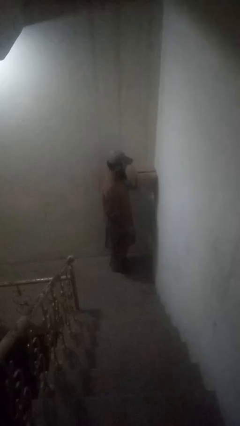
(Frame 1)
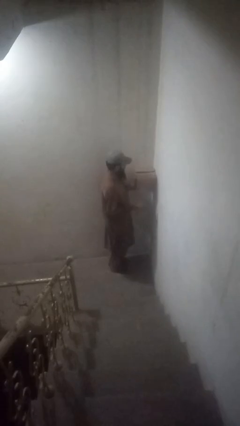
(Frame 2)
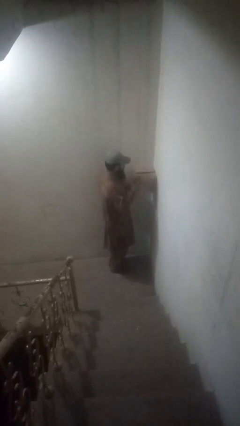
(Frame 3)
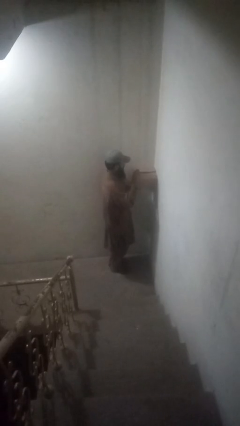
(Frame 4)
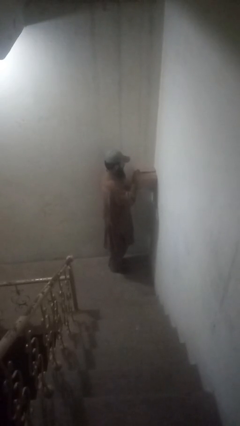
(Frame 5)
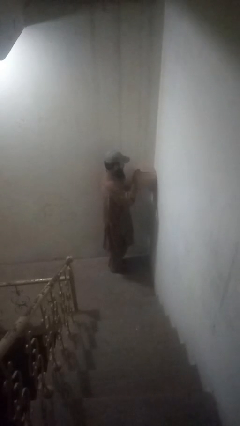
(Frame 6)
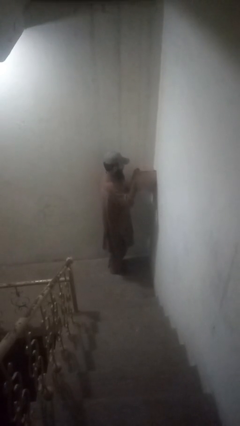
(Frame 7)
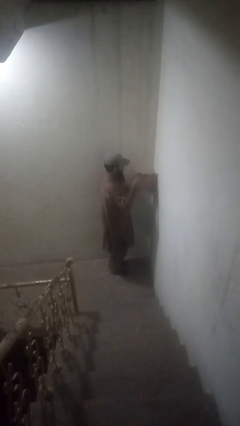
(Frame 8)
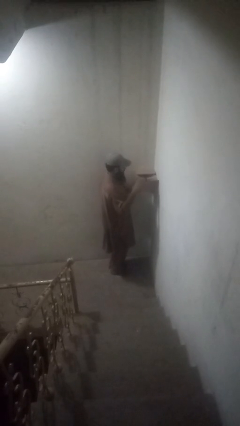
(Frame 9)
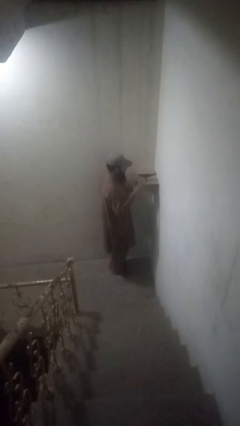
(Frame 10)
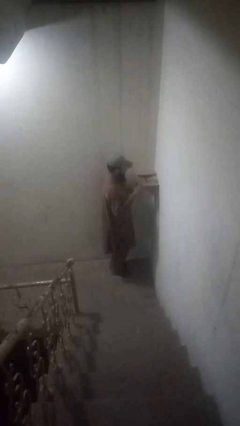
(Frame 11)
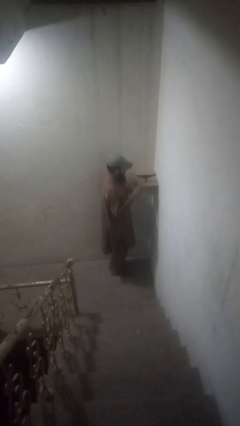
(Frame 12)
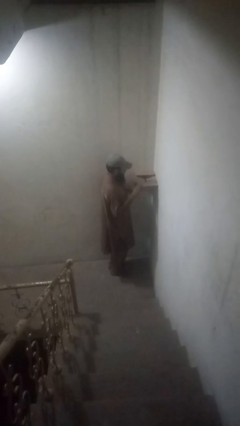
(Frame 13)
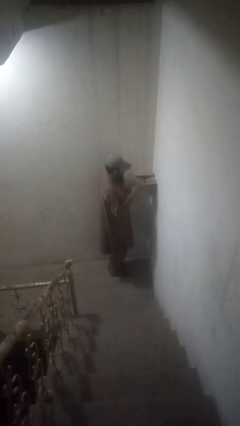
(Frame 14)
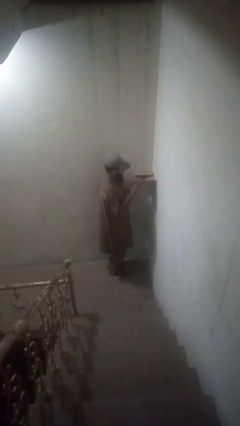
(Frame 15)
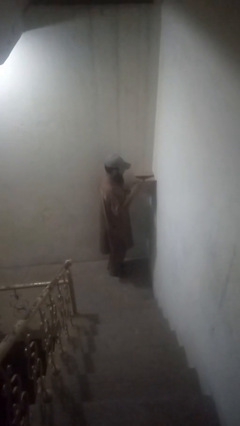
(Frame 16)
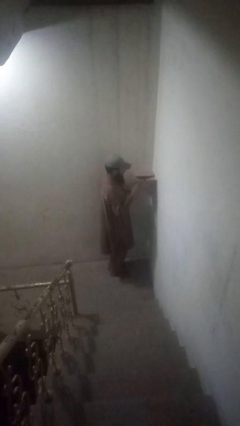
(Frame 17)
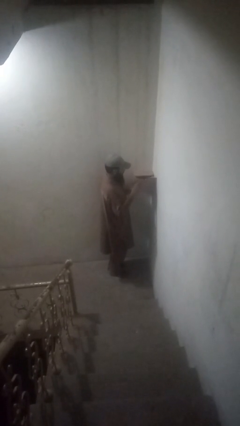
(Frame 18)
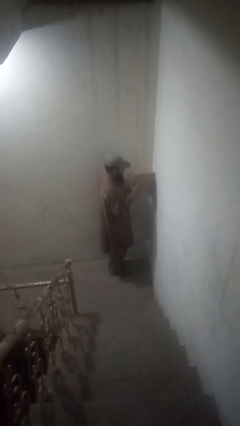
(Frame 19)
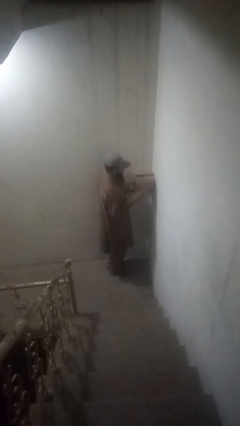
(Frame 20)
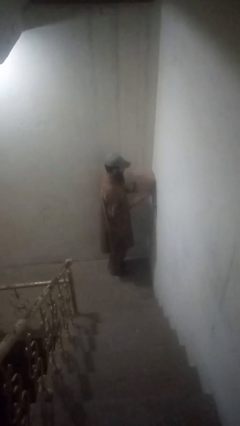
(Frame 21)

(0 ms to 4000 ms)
person opens mailbox

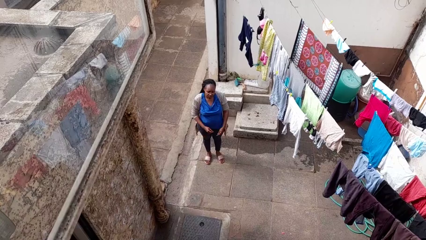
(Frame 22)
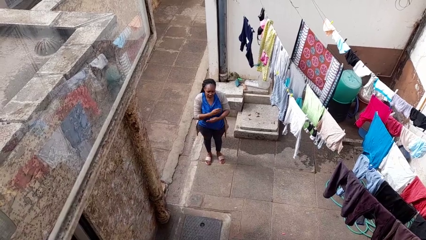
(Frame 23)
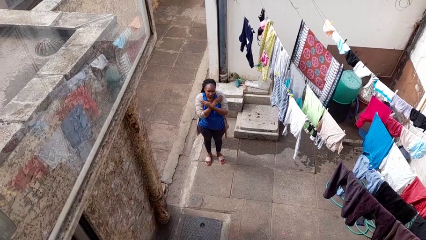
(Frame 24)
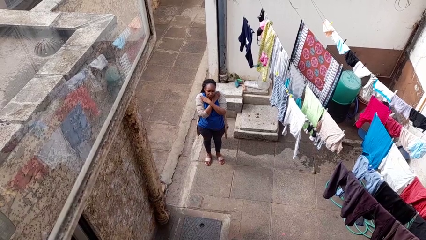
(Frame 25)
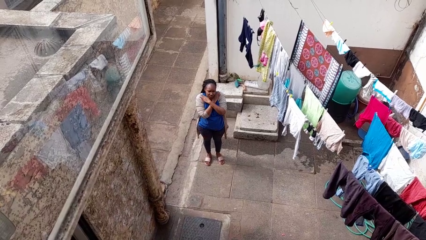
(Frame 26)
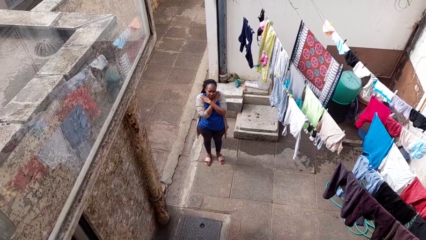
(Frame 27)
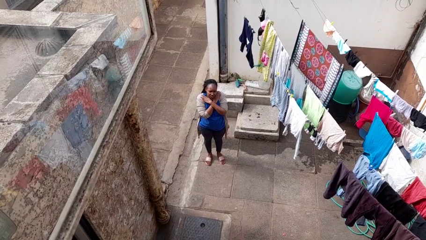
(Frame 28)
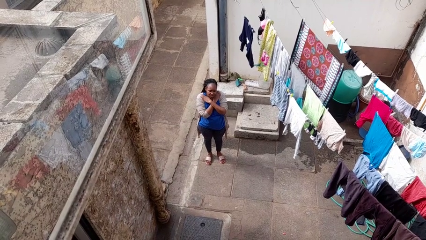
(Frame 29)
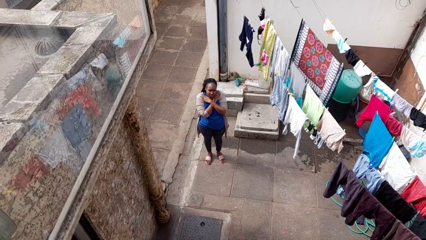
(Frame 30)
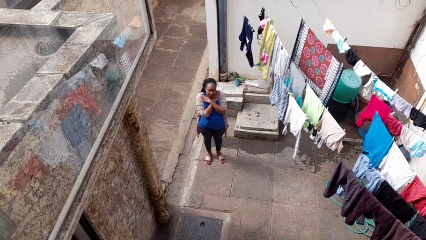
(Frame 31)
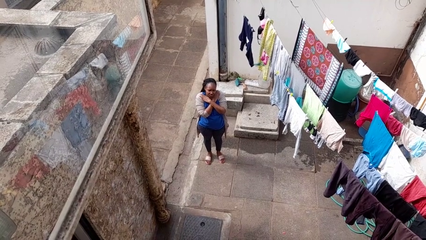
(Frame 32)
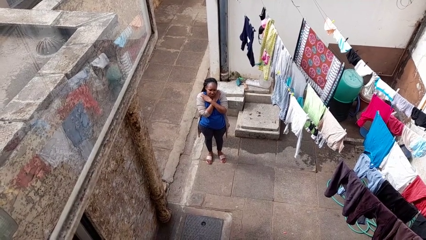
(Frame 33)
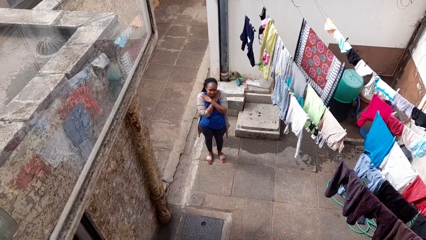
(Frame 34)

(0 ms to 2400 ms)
person gestures arms x

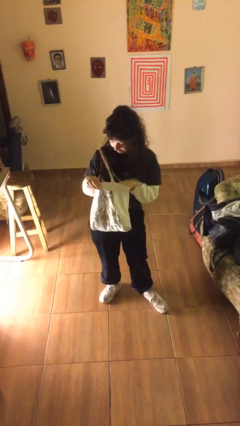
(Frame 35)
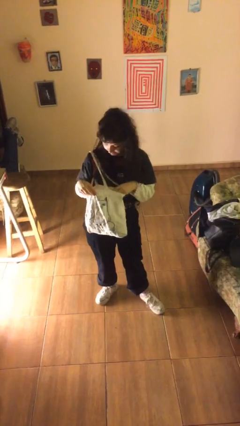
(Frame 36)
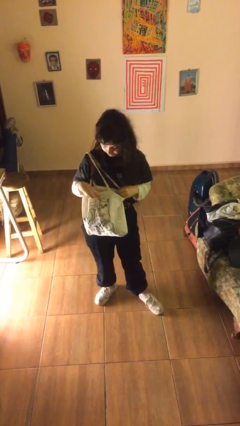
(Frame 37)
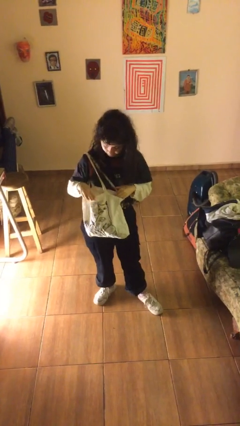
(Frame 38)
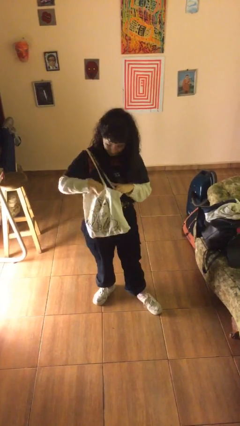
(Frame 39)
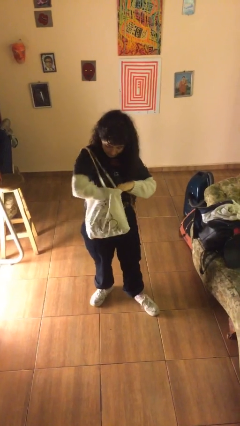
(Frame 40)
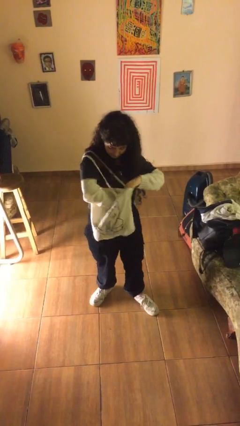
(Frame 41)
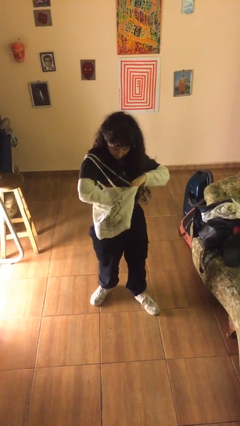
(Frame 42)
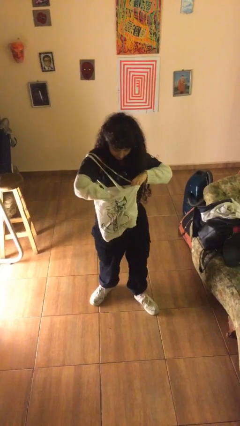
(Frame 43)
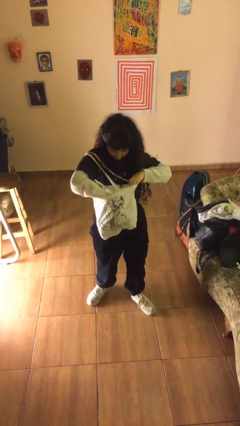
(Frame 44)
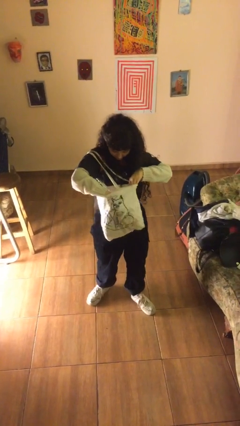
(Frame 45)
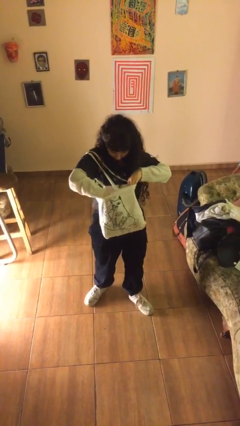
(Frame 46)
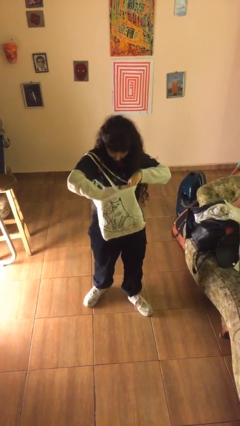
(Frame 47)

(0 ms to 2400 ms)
person searches in purse

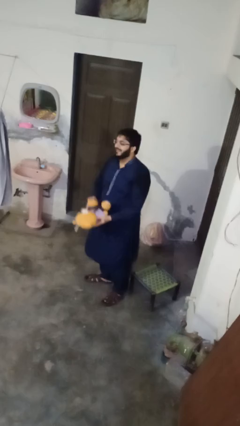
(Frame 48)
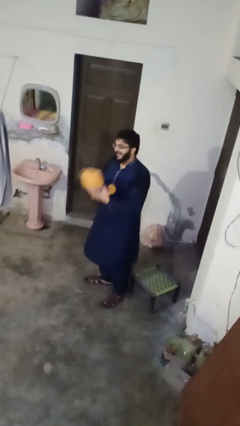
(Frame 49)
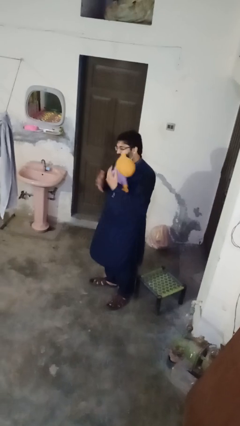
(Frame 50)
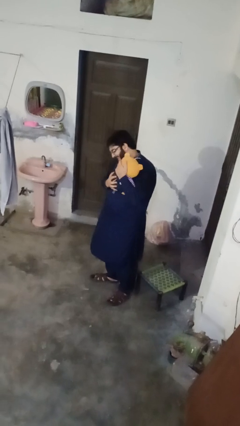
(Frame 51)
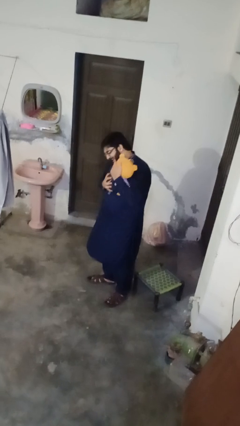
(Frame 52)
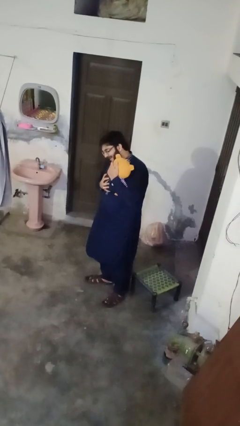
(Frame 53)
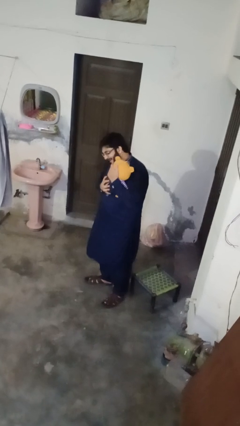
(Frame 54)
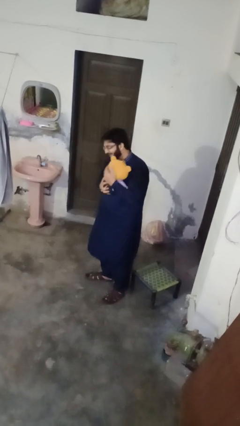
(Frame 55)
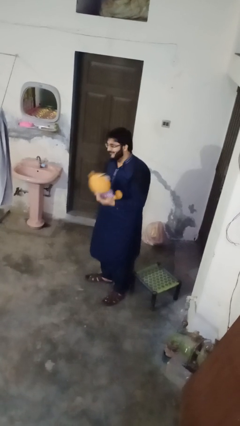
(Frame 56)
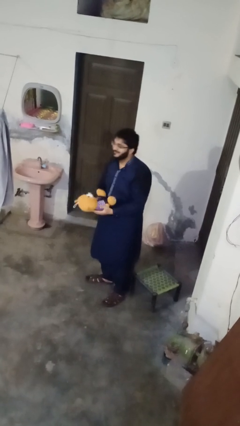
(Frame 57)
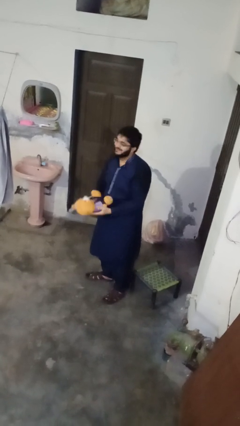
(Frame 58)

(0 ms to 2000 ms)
person hugs stuffed animal

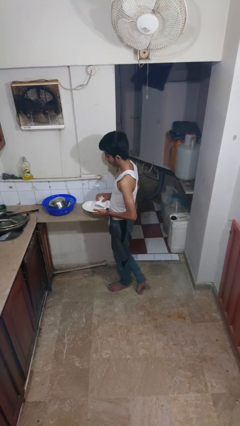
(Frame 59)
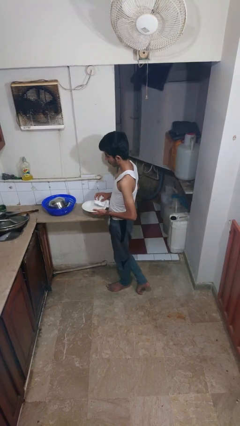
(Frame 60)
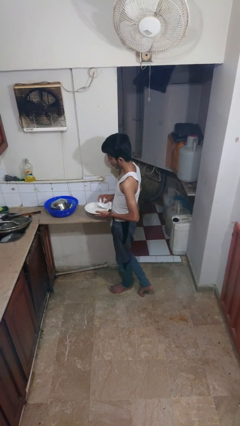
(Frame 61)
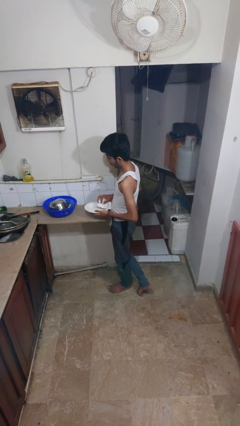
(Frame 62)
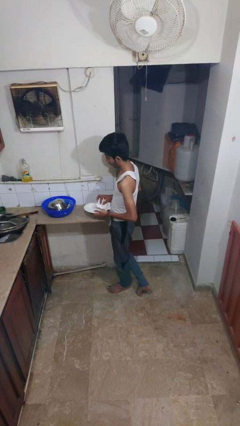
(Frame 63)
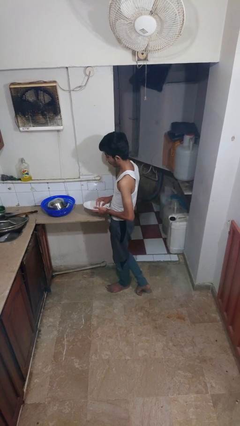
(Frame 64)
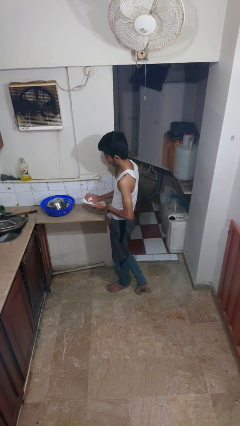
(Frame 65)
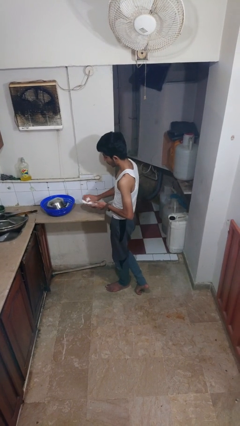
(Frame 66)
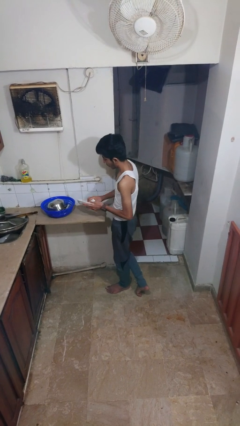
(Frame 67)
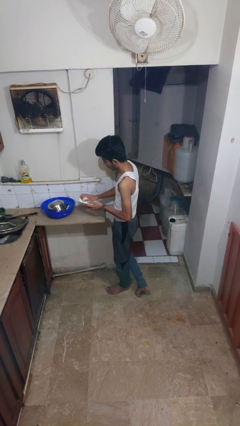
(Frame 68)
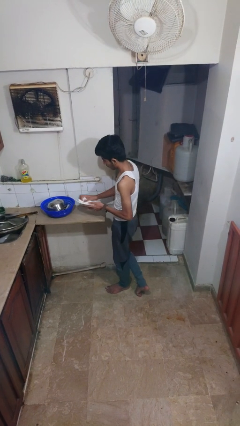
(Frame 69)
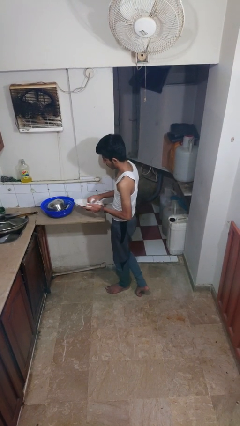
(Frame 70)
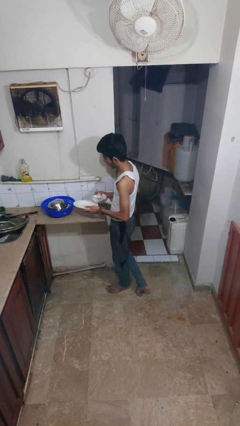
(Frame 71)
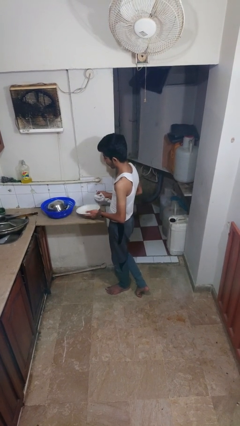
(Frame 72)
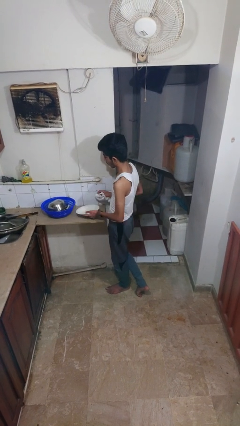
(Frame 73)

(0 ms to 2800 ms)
person dries dish

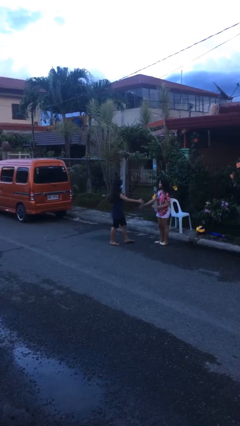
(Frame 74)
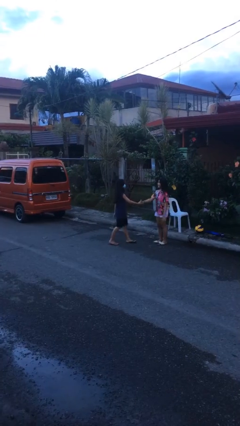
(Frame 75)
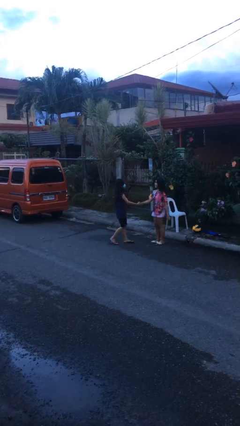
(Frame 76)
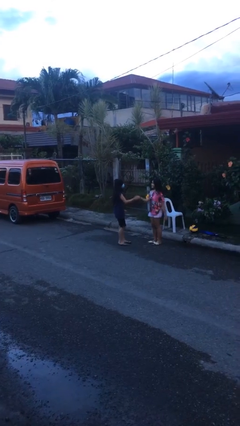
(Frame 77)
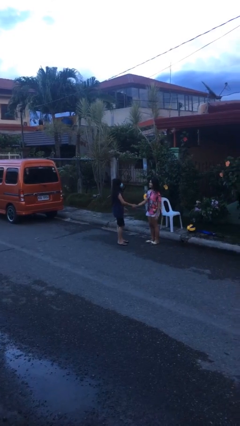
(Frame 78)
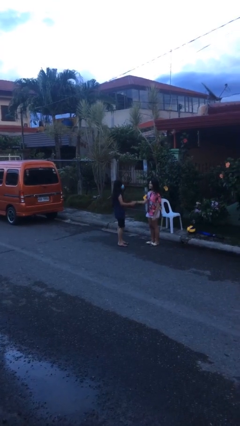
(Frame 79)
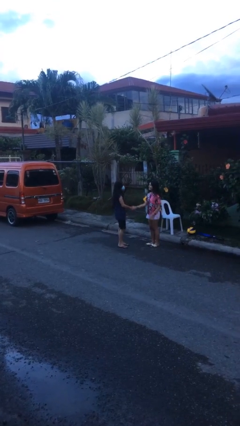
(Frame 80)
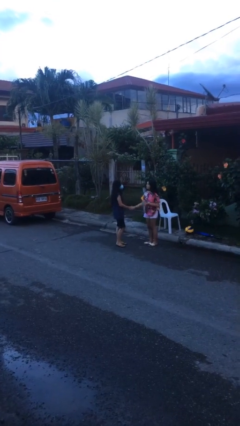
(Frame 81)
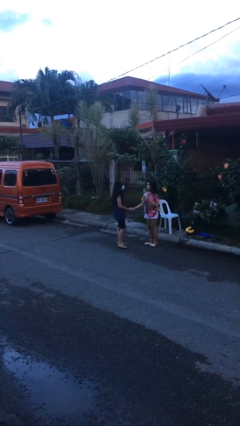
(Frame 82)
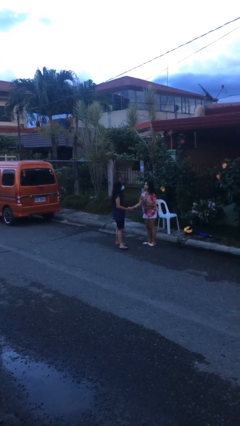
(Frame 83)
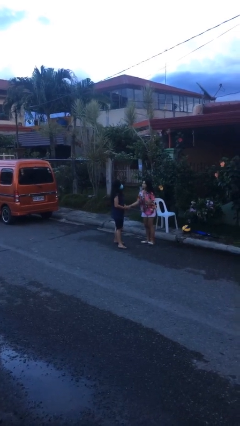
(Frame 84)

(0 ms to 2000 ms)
person shakes hand

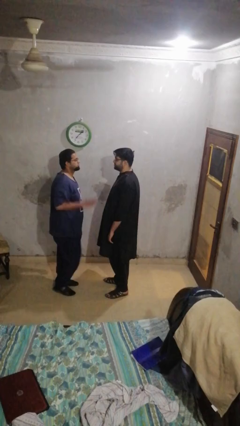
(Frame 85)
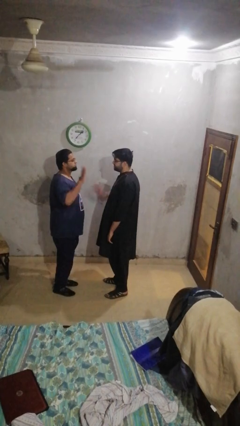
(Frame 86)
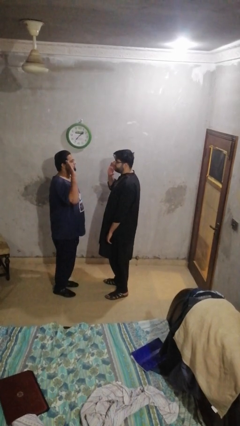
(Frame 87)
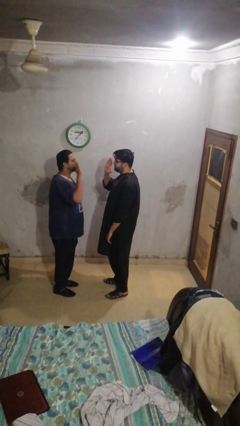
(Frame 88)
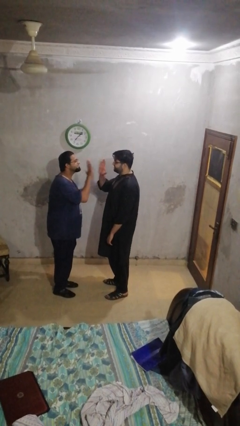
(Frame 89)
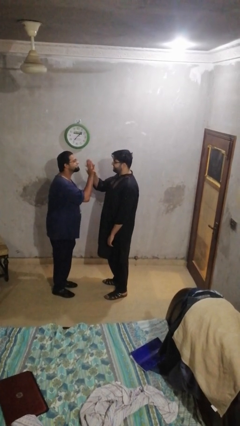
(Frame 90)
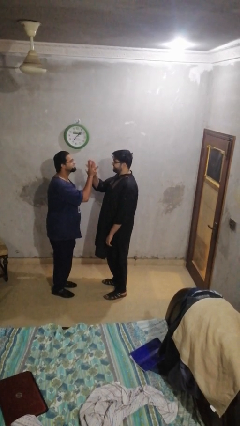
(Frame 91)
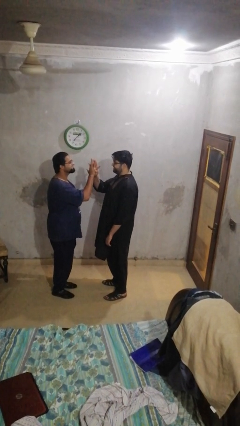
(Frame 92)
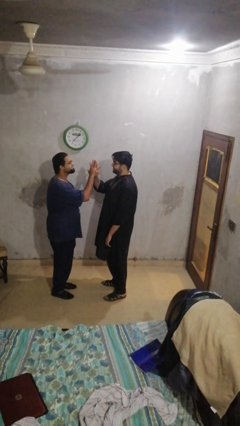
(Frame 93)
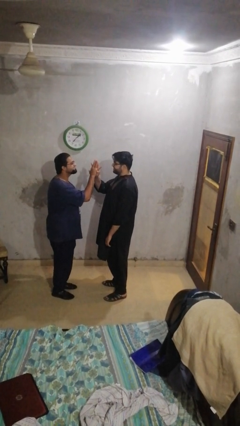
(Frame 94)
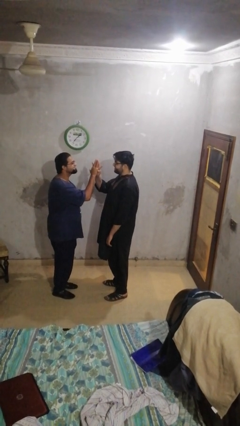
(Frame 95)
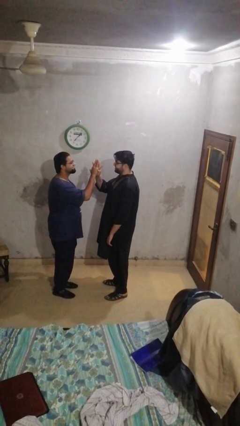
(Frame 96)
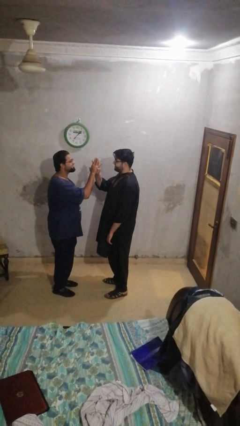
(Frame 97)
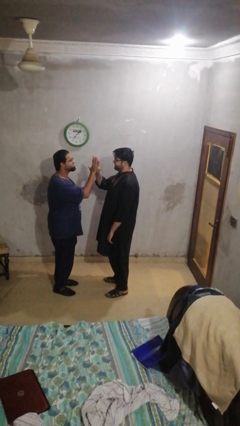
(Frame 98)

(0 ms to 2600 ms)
person highfives hand
